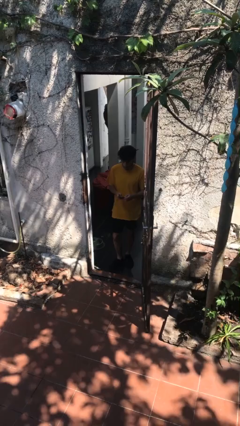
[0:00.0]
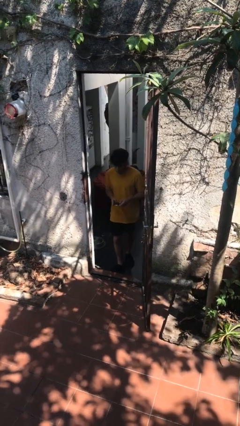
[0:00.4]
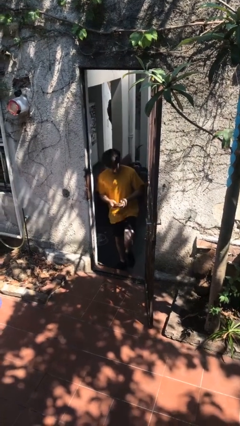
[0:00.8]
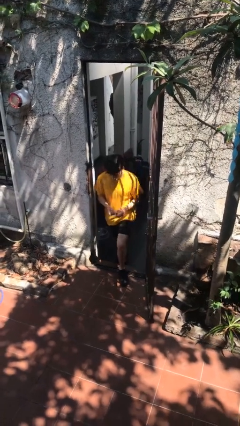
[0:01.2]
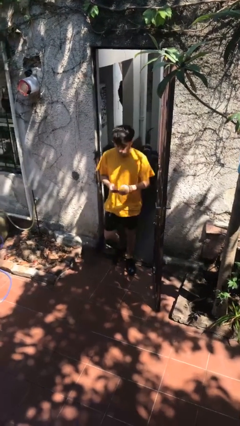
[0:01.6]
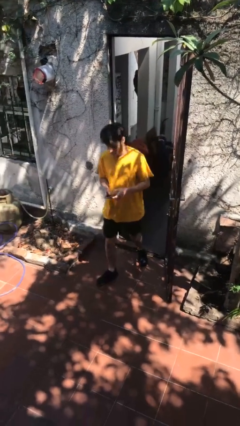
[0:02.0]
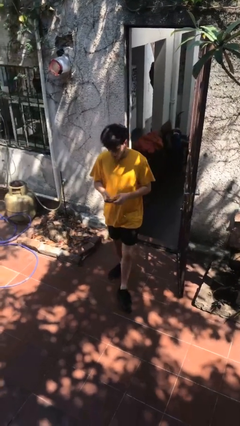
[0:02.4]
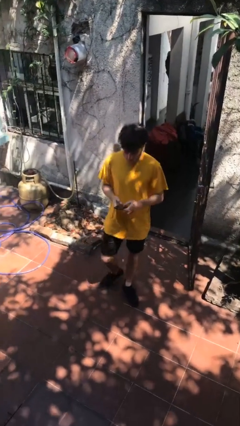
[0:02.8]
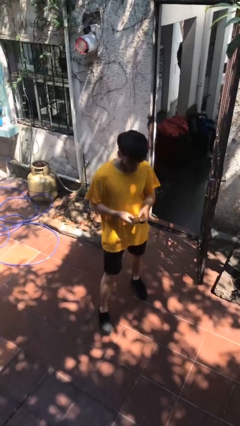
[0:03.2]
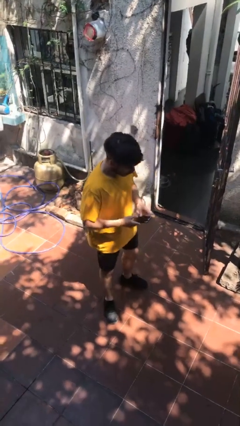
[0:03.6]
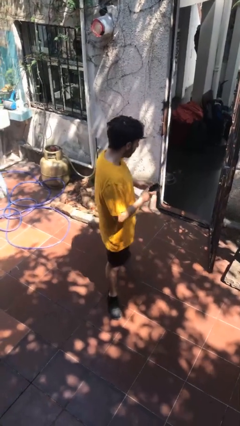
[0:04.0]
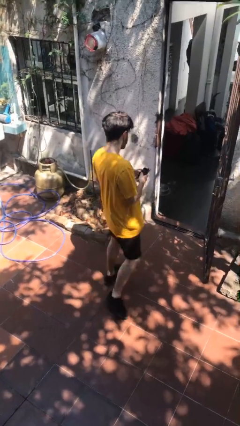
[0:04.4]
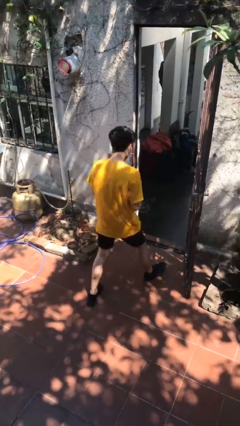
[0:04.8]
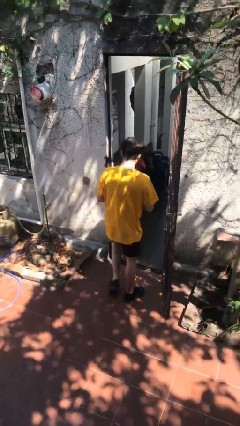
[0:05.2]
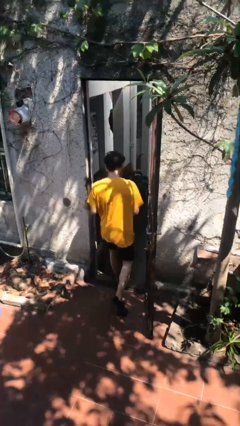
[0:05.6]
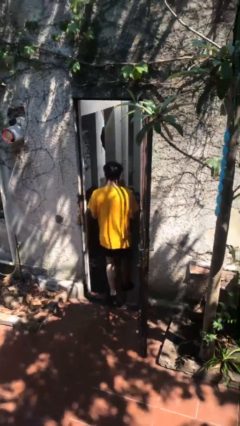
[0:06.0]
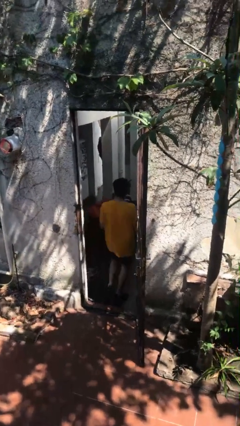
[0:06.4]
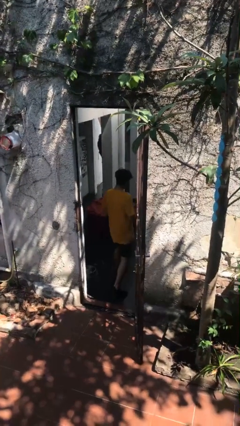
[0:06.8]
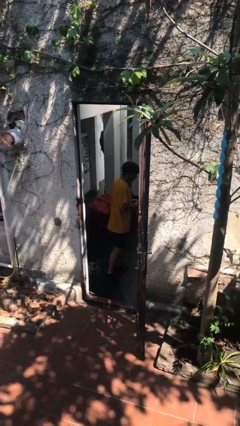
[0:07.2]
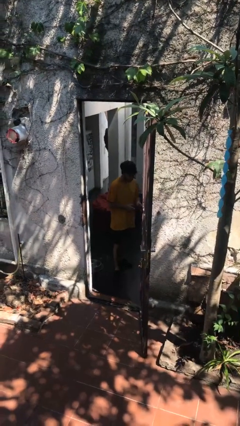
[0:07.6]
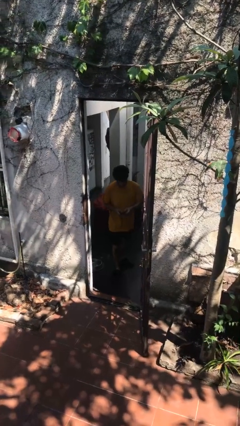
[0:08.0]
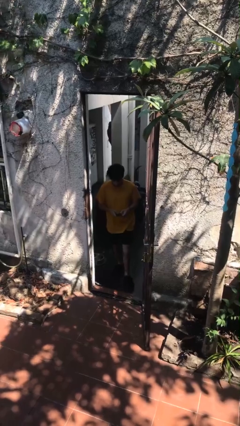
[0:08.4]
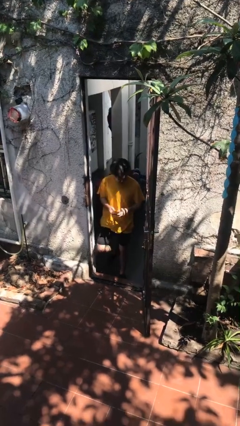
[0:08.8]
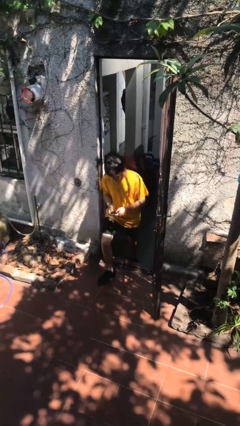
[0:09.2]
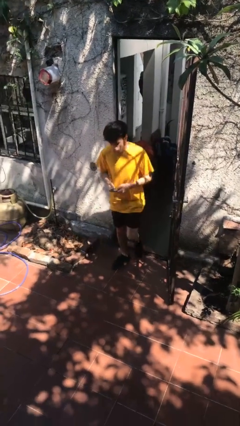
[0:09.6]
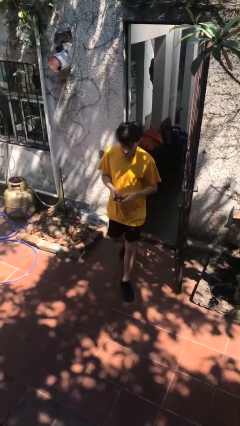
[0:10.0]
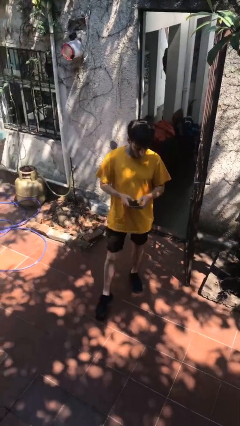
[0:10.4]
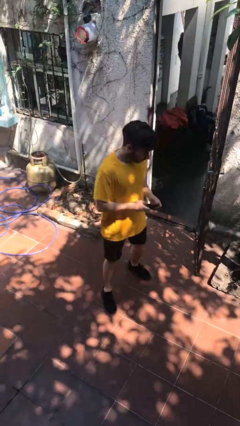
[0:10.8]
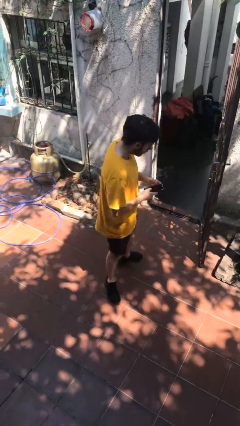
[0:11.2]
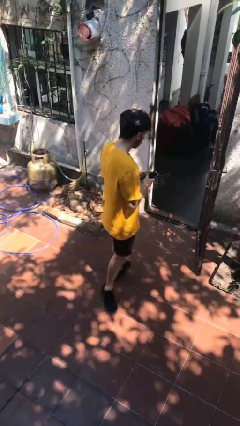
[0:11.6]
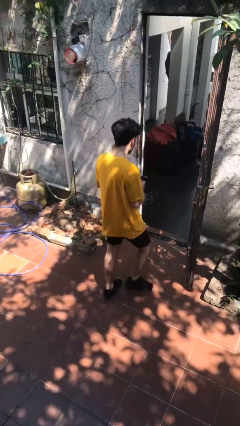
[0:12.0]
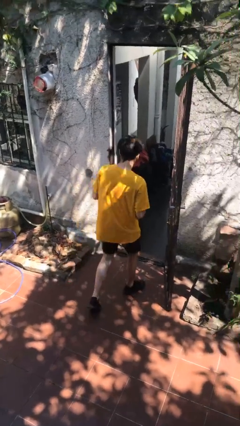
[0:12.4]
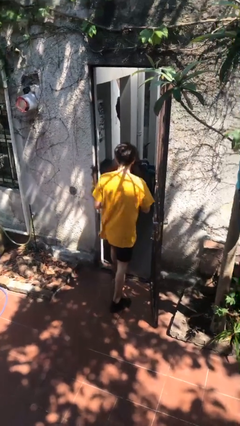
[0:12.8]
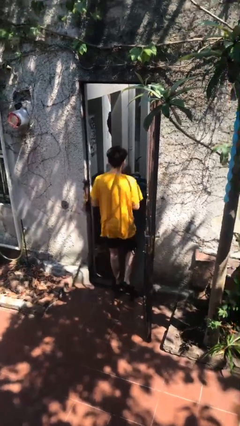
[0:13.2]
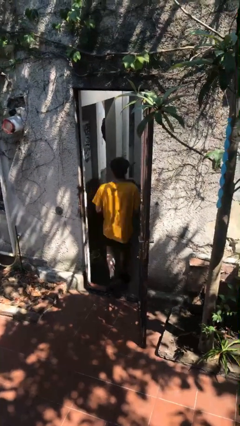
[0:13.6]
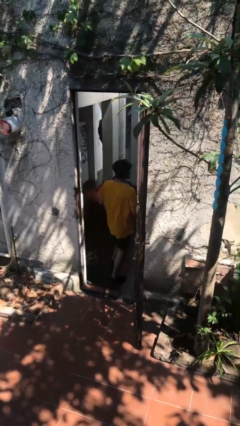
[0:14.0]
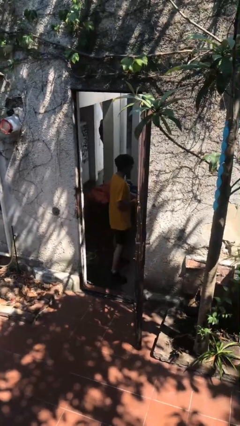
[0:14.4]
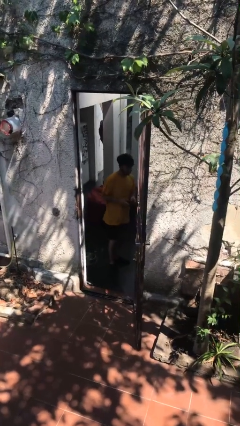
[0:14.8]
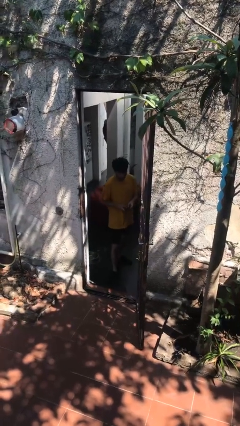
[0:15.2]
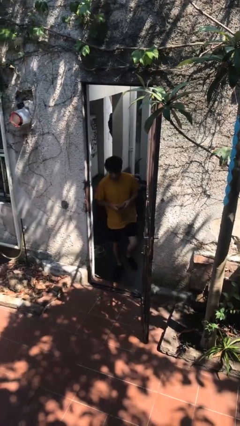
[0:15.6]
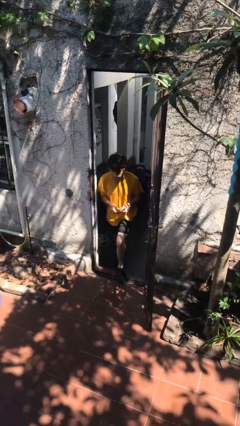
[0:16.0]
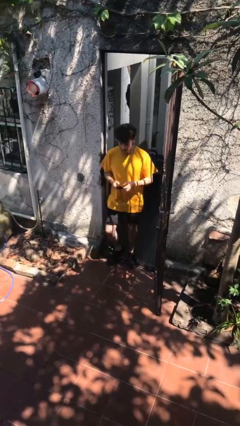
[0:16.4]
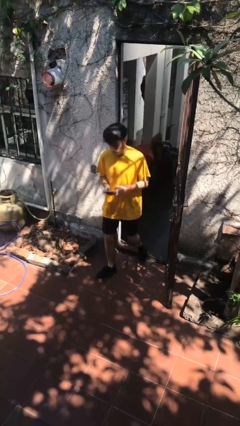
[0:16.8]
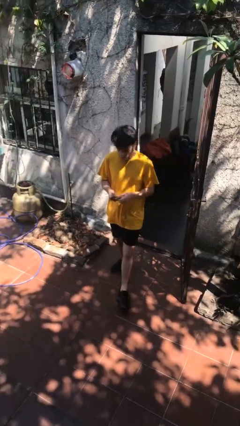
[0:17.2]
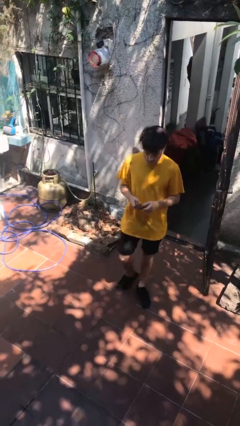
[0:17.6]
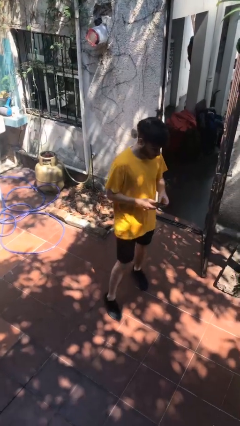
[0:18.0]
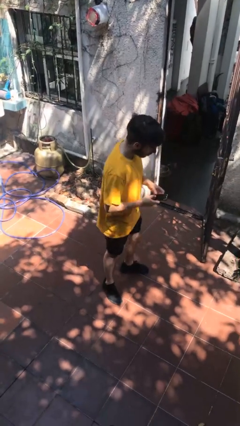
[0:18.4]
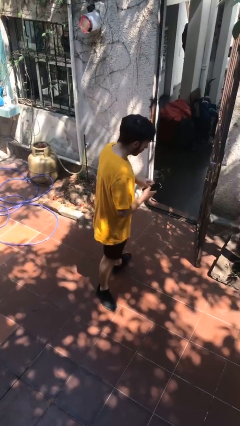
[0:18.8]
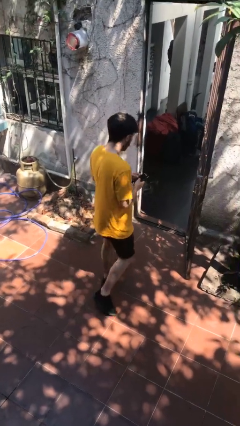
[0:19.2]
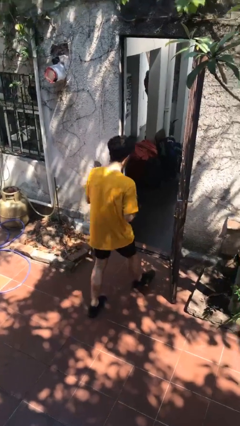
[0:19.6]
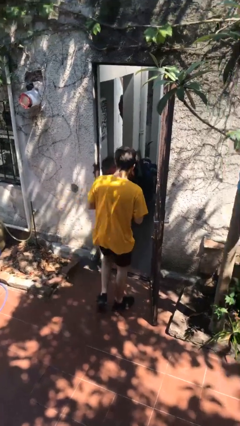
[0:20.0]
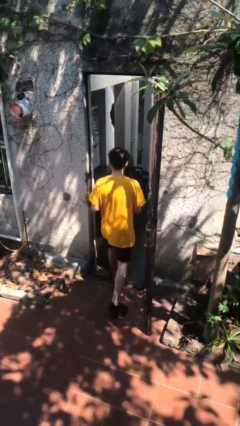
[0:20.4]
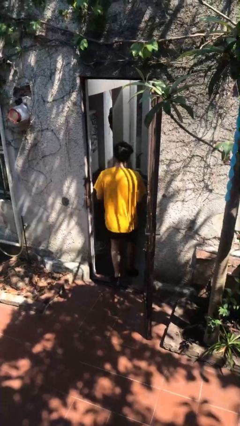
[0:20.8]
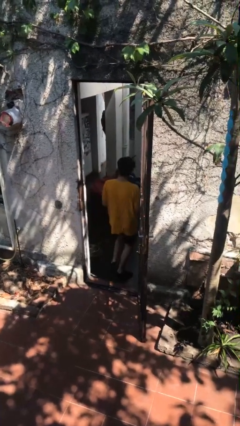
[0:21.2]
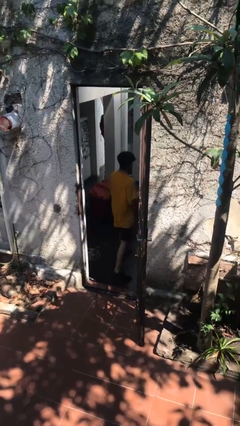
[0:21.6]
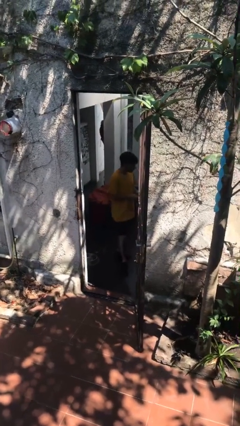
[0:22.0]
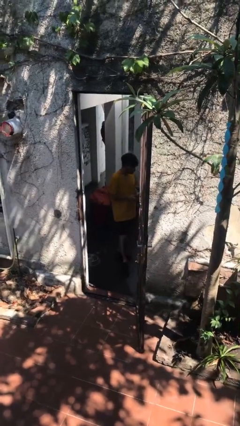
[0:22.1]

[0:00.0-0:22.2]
person texts on phone

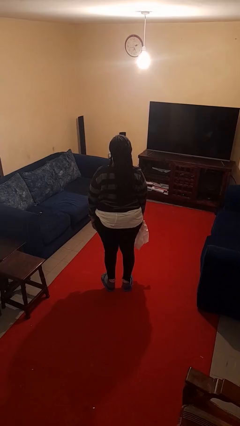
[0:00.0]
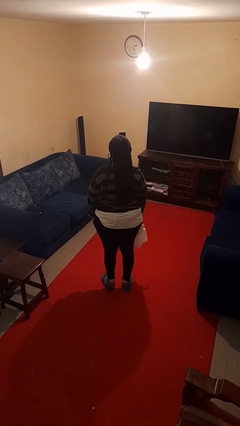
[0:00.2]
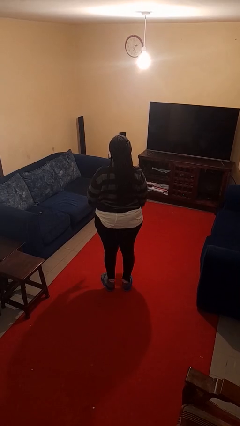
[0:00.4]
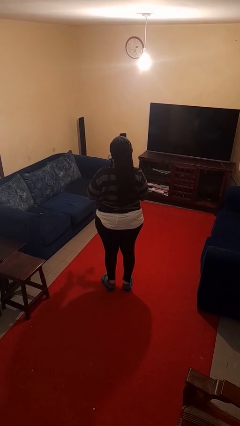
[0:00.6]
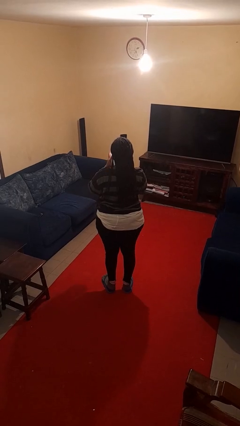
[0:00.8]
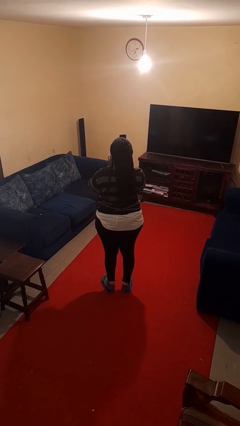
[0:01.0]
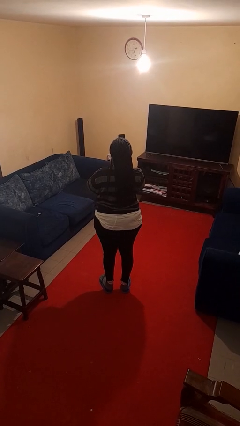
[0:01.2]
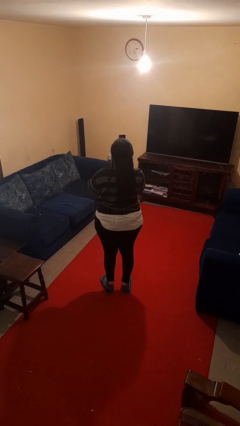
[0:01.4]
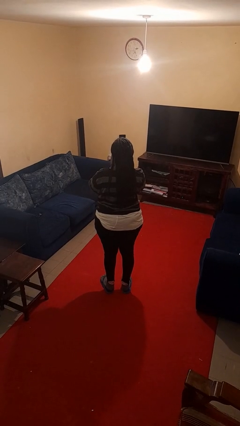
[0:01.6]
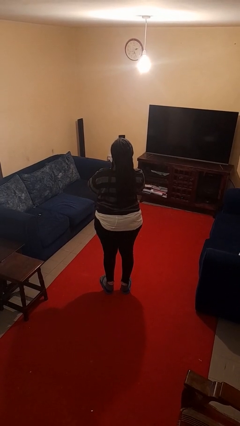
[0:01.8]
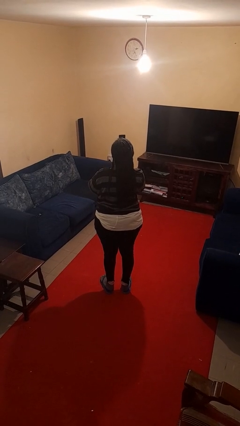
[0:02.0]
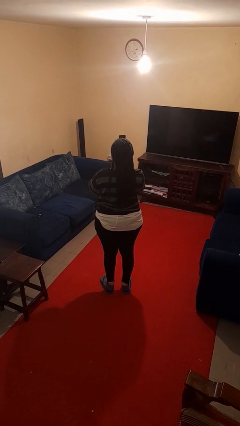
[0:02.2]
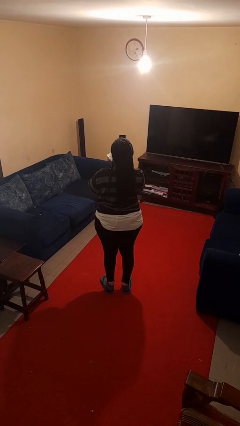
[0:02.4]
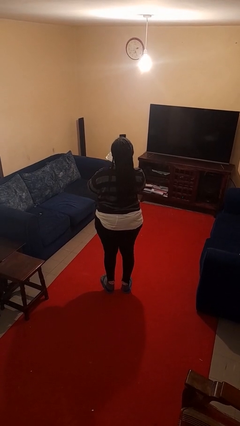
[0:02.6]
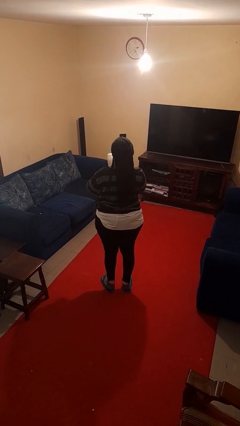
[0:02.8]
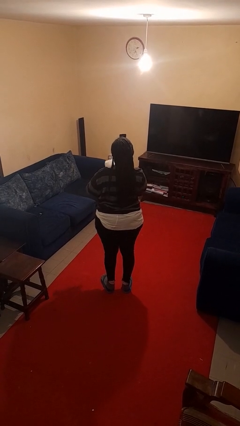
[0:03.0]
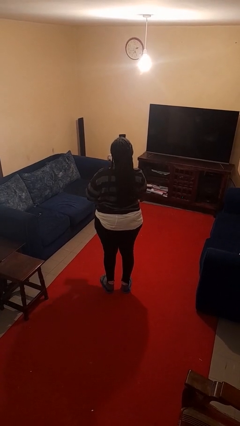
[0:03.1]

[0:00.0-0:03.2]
person wipes mouth with napkin

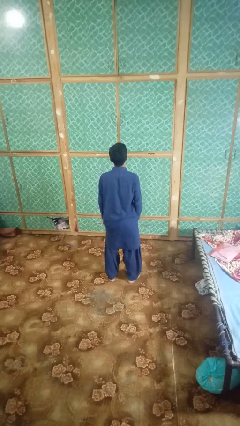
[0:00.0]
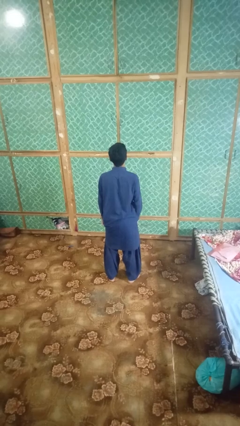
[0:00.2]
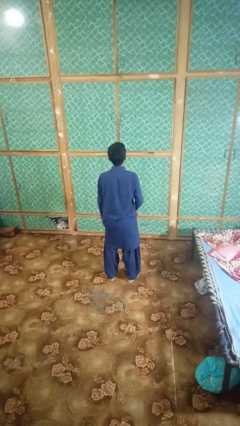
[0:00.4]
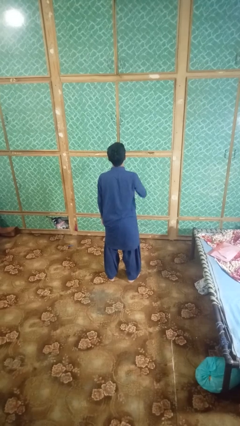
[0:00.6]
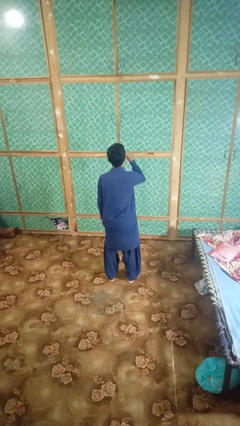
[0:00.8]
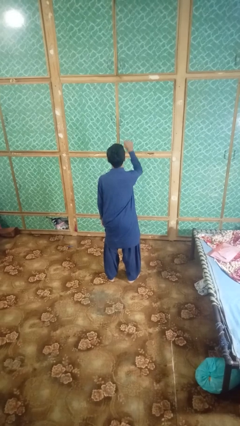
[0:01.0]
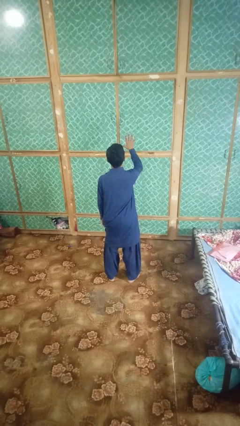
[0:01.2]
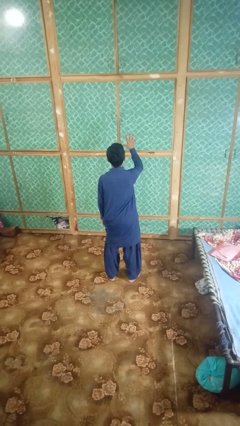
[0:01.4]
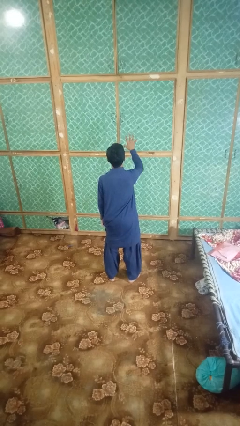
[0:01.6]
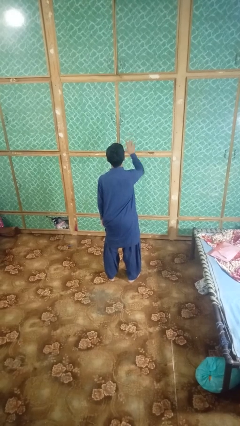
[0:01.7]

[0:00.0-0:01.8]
person gestures number five

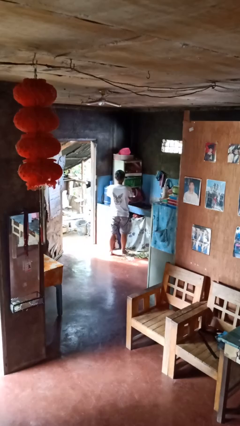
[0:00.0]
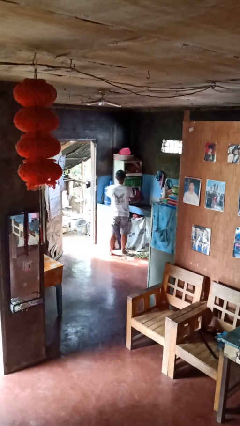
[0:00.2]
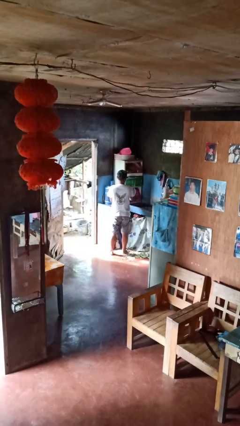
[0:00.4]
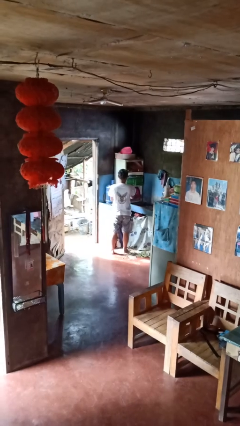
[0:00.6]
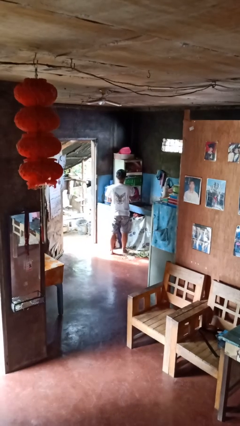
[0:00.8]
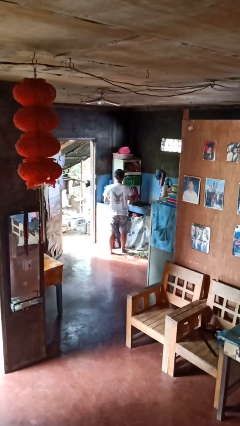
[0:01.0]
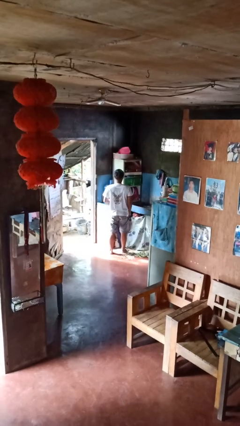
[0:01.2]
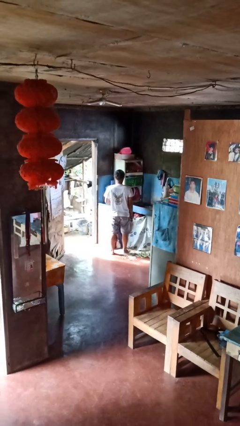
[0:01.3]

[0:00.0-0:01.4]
person closes dishwasher

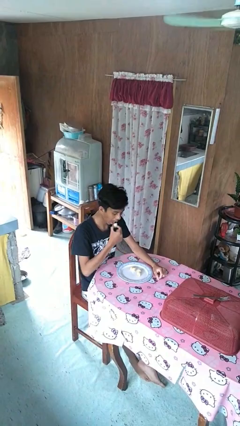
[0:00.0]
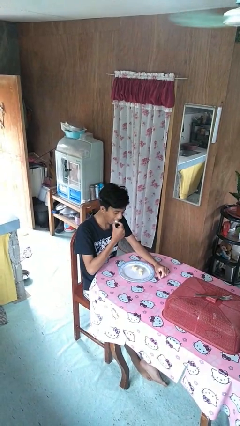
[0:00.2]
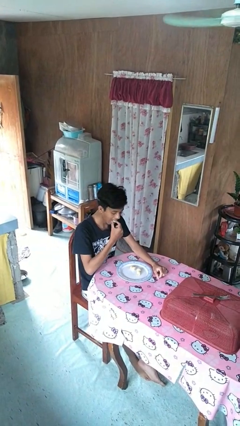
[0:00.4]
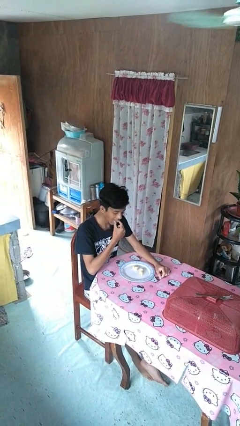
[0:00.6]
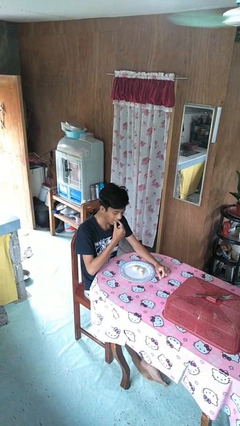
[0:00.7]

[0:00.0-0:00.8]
person eats with hands
